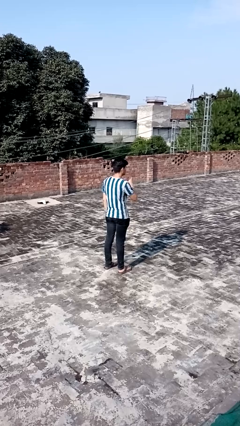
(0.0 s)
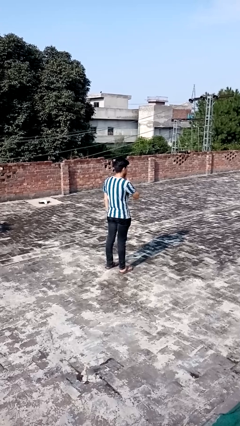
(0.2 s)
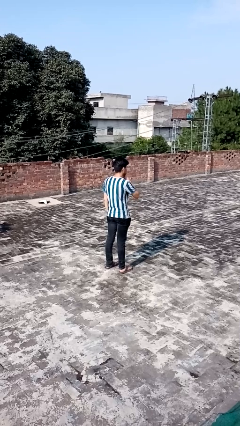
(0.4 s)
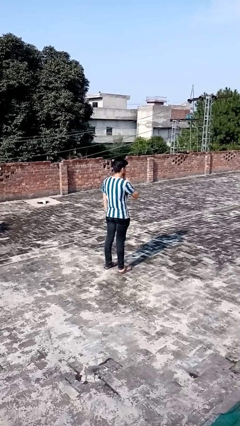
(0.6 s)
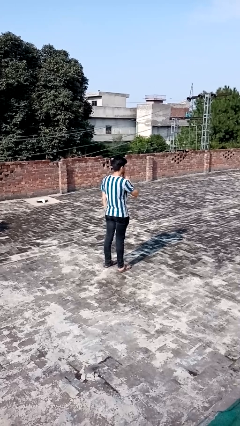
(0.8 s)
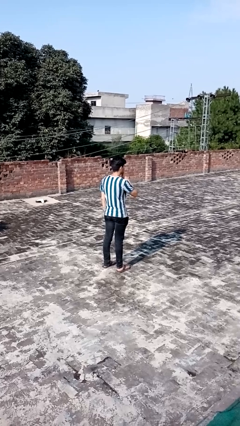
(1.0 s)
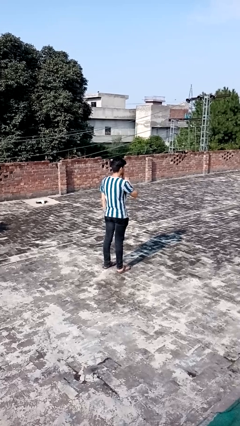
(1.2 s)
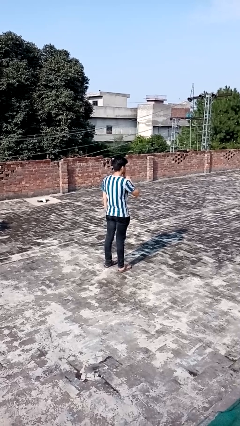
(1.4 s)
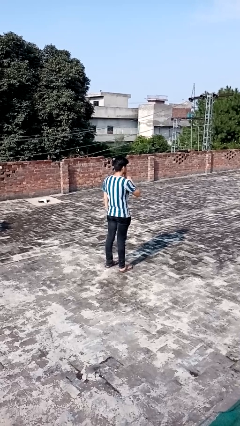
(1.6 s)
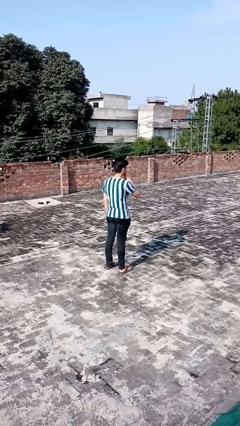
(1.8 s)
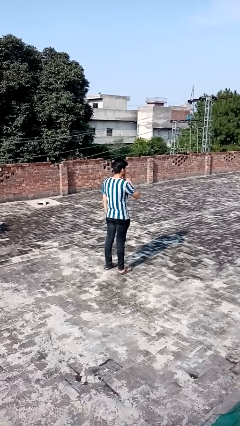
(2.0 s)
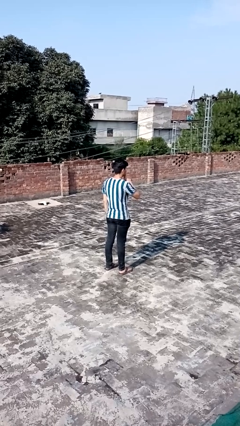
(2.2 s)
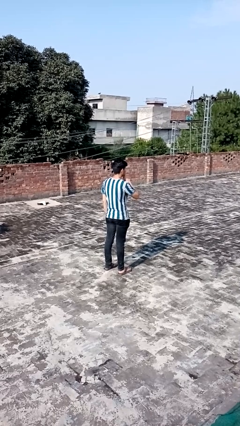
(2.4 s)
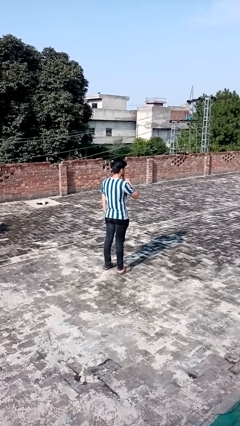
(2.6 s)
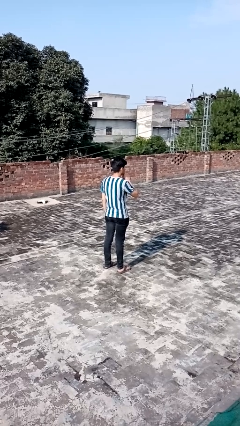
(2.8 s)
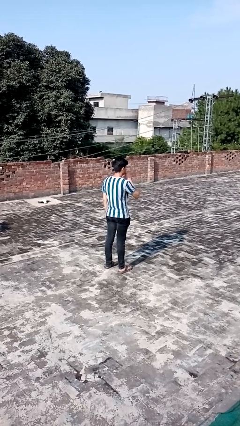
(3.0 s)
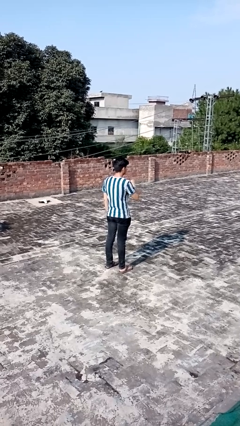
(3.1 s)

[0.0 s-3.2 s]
person gestures be quiet

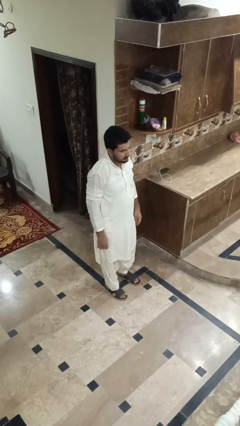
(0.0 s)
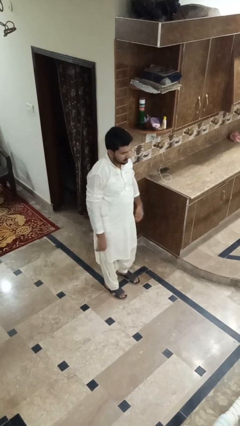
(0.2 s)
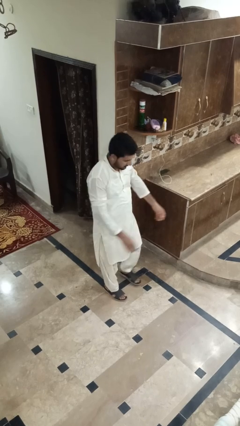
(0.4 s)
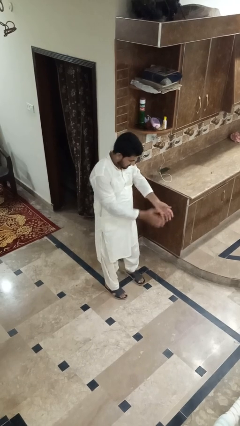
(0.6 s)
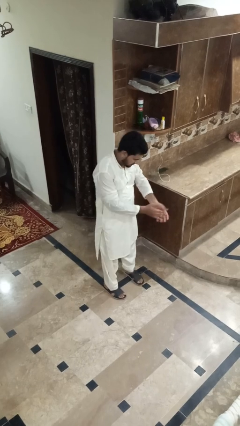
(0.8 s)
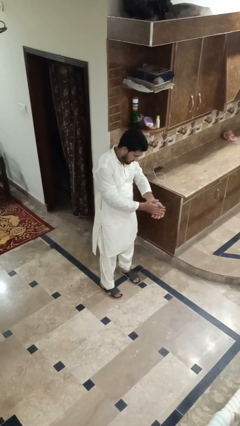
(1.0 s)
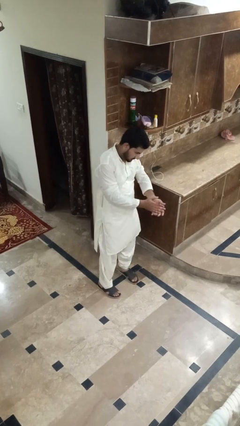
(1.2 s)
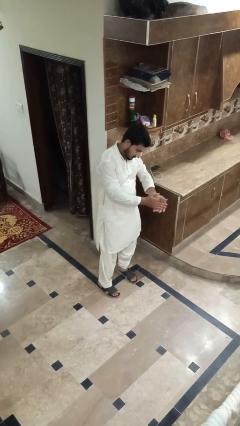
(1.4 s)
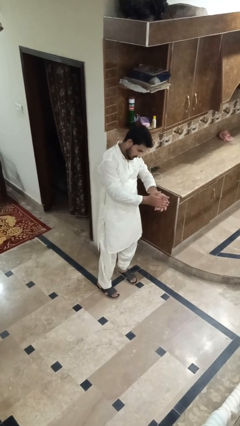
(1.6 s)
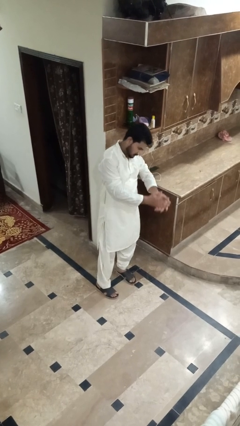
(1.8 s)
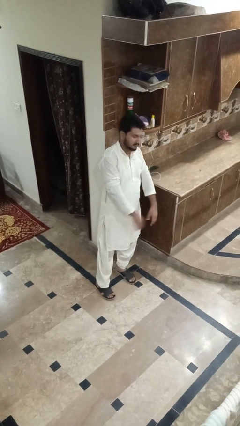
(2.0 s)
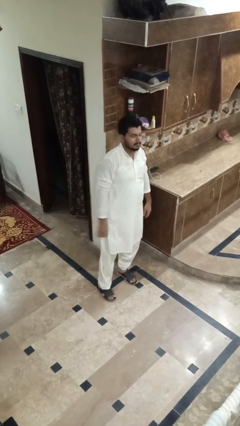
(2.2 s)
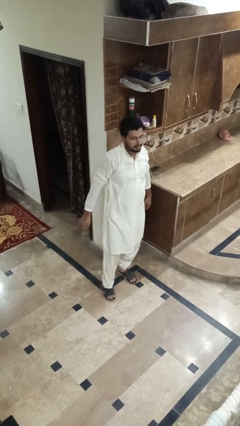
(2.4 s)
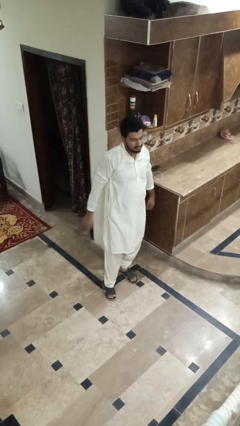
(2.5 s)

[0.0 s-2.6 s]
person claps hands

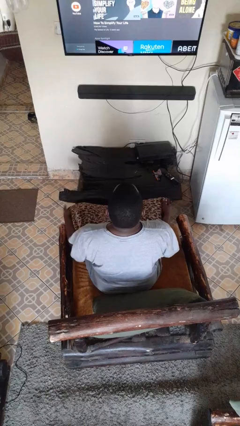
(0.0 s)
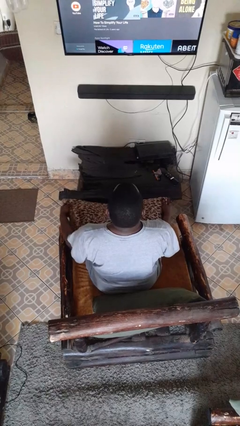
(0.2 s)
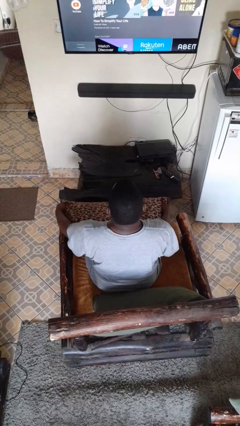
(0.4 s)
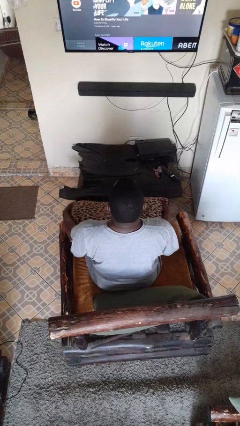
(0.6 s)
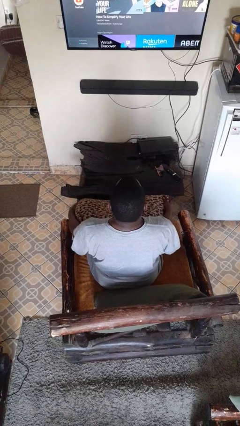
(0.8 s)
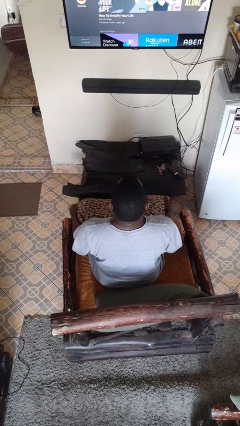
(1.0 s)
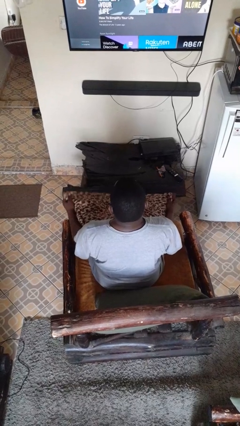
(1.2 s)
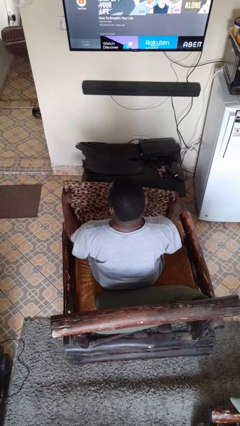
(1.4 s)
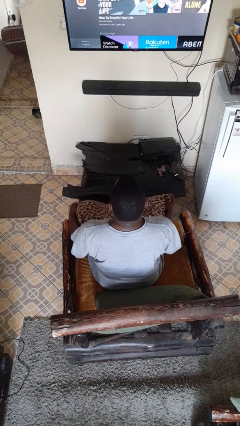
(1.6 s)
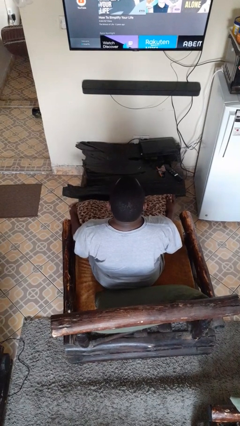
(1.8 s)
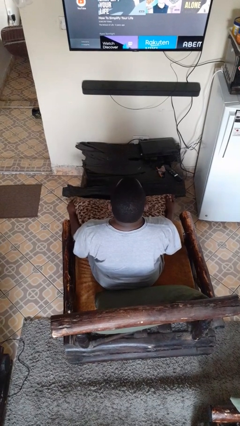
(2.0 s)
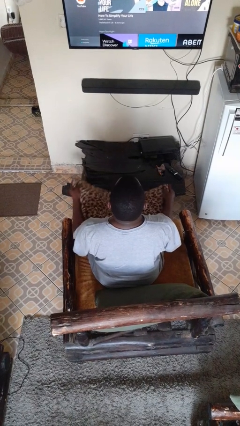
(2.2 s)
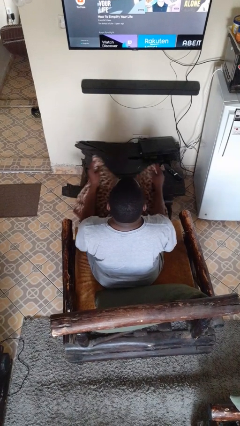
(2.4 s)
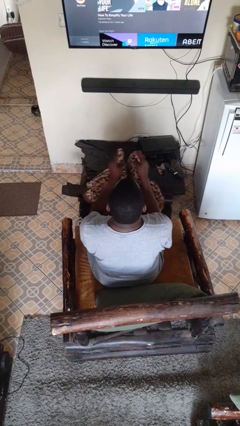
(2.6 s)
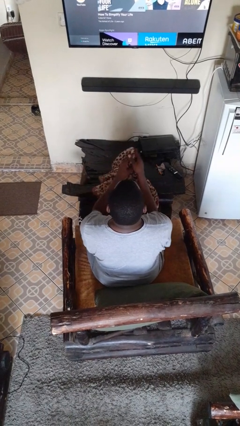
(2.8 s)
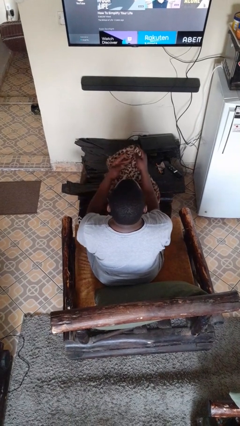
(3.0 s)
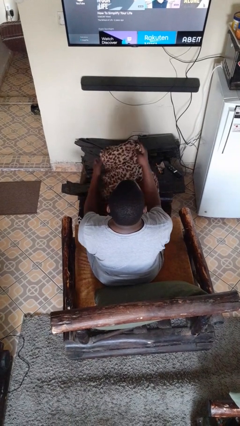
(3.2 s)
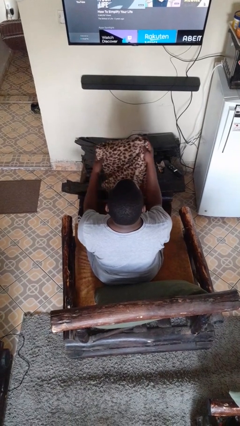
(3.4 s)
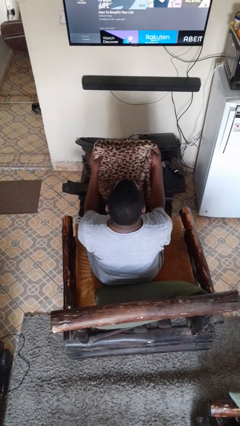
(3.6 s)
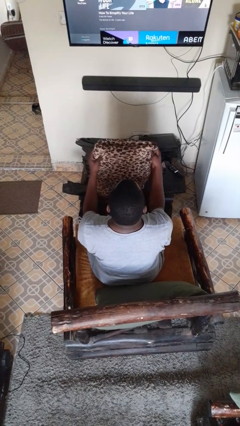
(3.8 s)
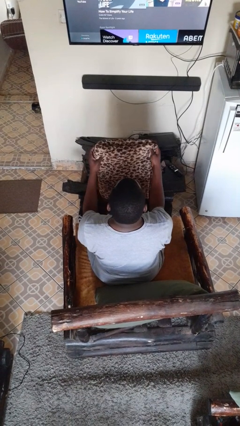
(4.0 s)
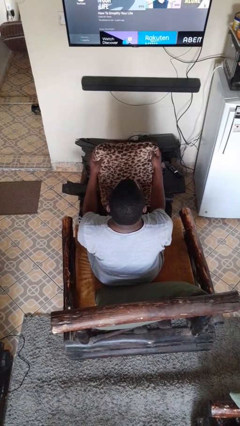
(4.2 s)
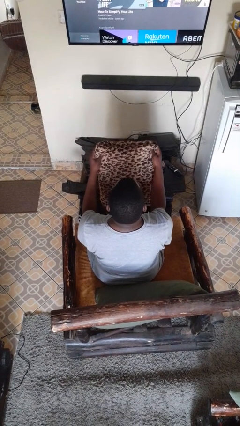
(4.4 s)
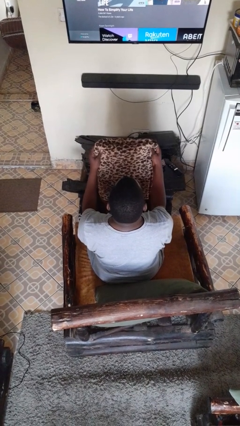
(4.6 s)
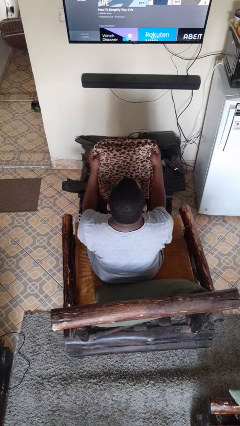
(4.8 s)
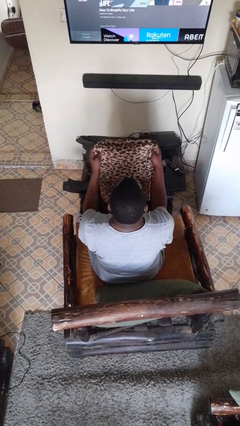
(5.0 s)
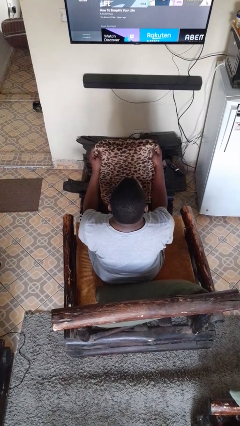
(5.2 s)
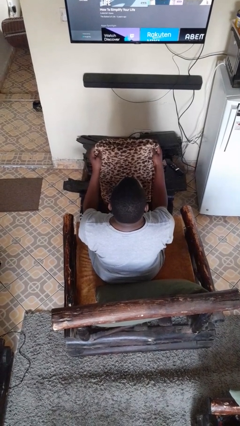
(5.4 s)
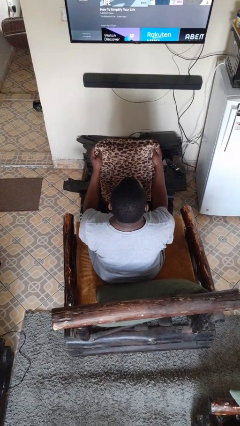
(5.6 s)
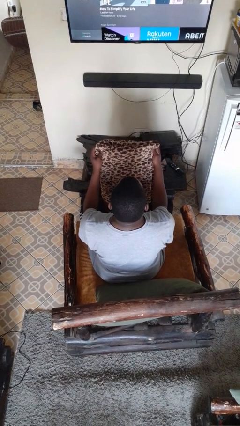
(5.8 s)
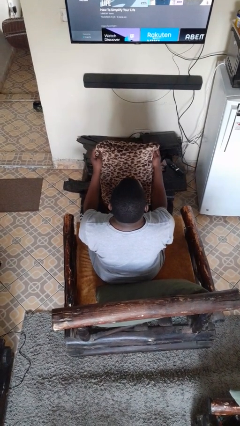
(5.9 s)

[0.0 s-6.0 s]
person folds blanket

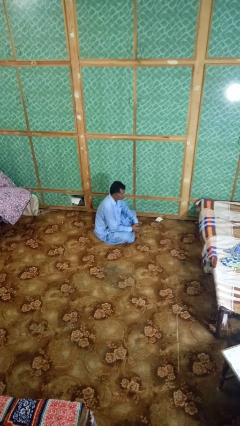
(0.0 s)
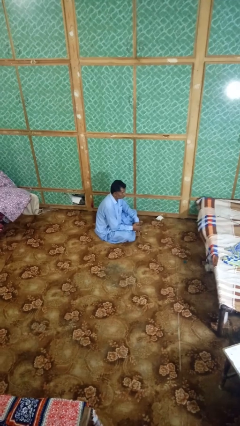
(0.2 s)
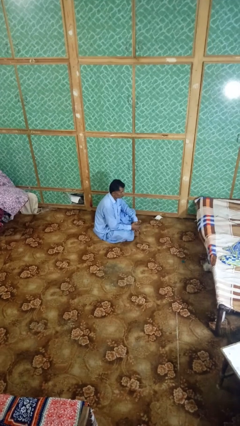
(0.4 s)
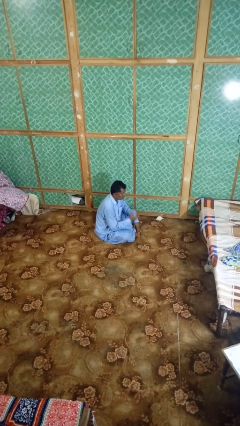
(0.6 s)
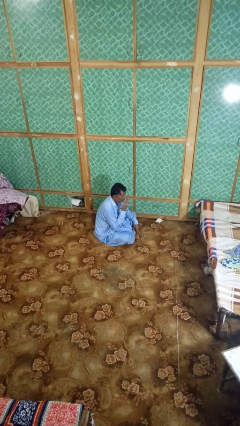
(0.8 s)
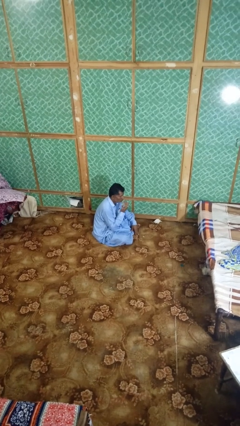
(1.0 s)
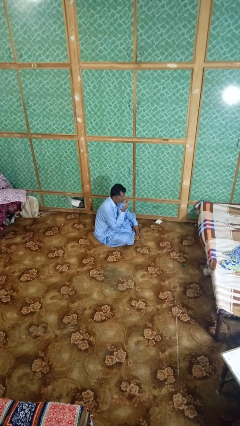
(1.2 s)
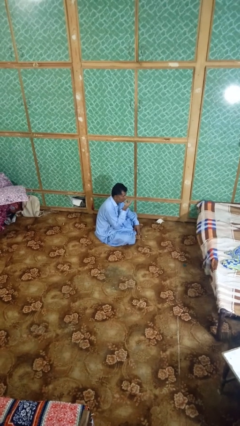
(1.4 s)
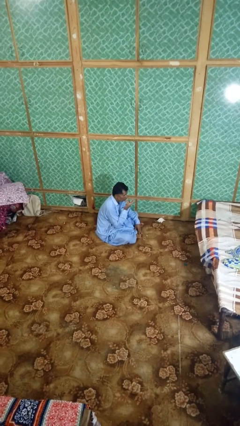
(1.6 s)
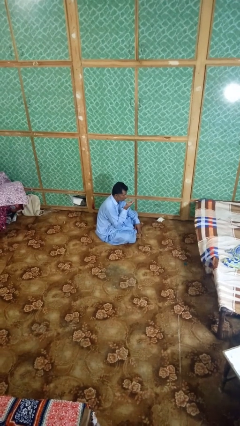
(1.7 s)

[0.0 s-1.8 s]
person licks fingers

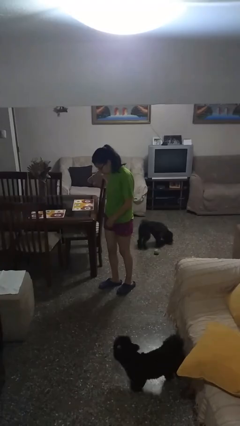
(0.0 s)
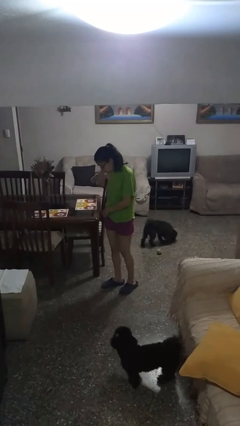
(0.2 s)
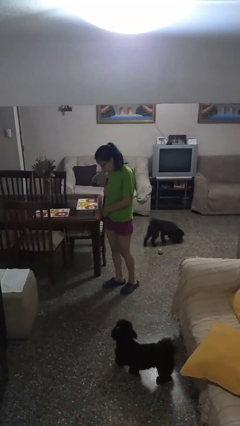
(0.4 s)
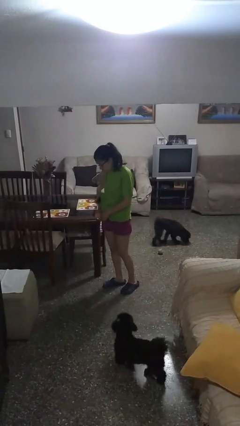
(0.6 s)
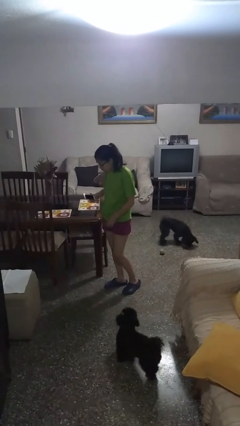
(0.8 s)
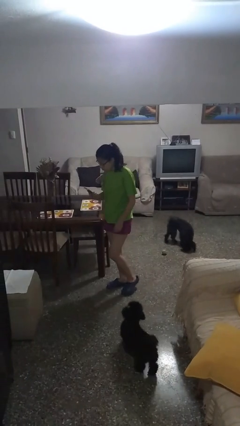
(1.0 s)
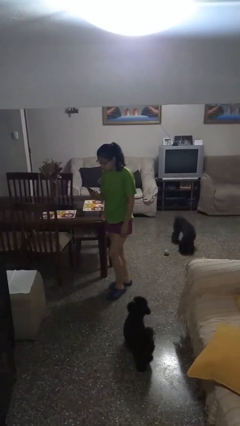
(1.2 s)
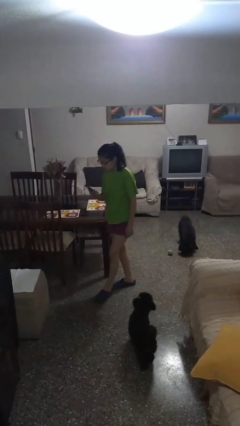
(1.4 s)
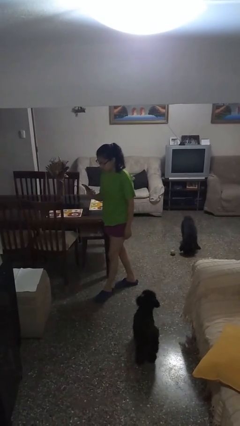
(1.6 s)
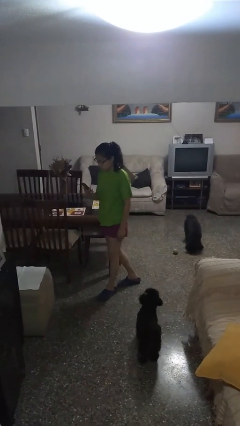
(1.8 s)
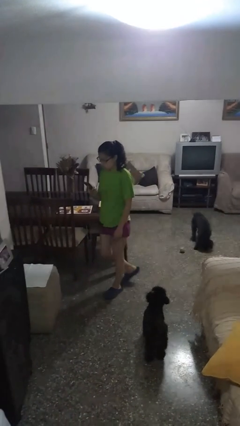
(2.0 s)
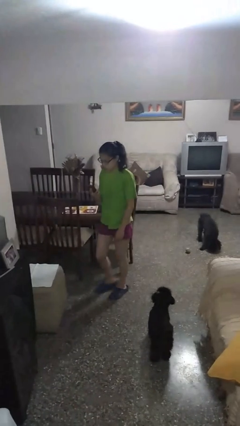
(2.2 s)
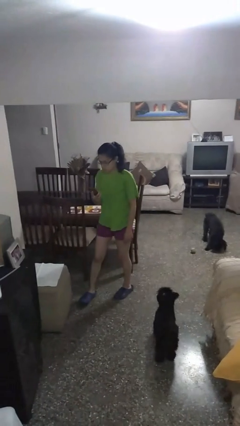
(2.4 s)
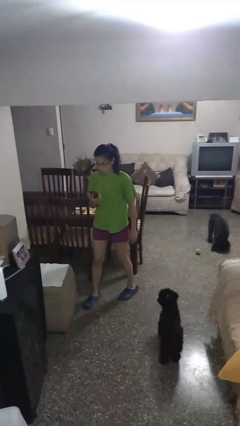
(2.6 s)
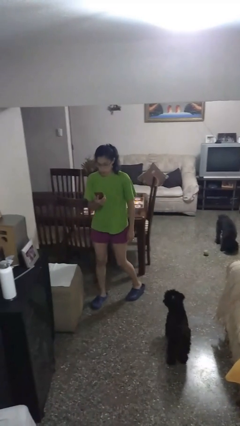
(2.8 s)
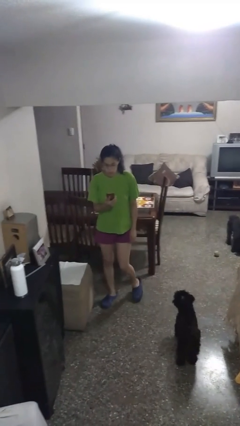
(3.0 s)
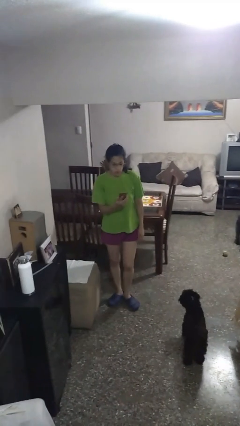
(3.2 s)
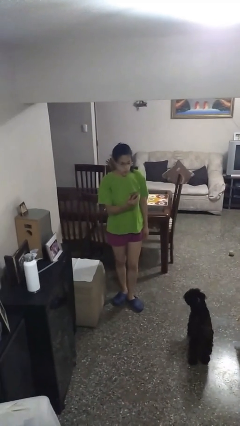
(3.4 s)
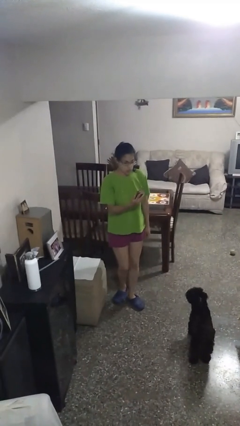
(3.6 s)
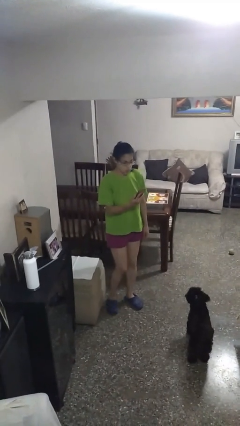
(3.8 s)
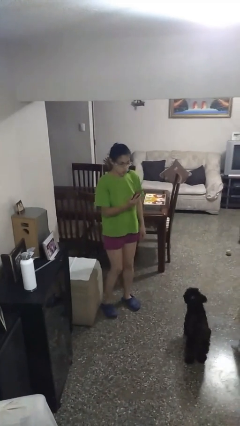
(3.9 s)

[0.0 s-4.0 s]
person takes phone from pocket
